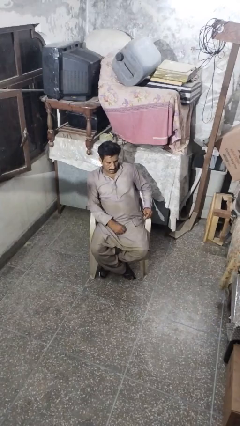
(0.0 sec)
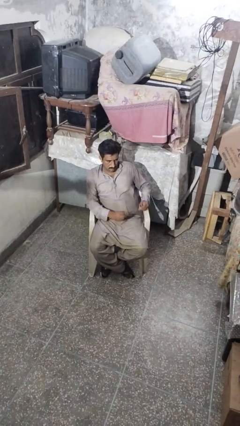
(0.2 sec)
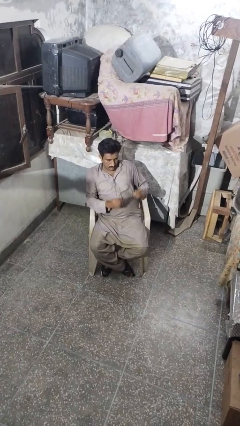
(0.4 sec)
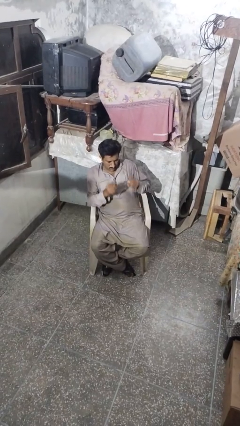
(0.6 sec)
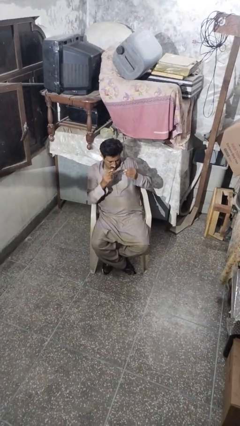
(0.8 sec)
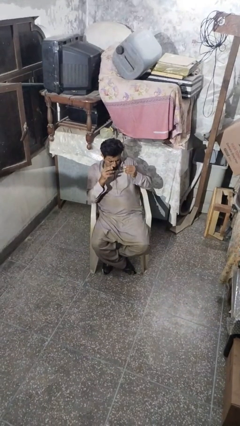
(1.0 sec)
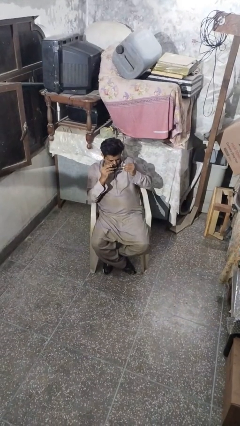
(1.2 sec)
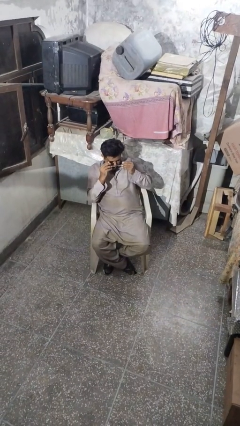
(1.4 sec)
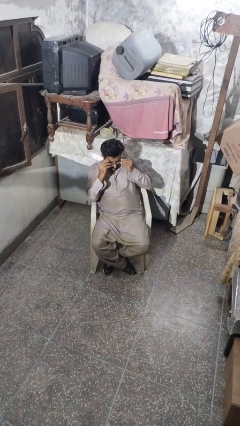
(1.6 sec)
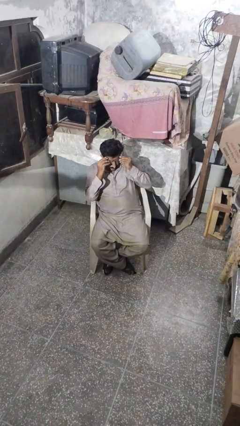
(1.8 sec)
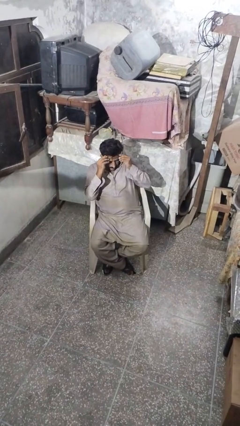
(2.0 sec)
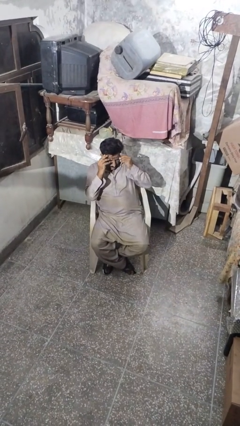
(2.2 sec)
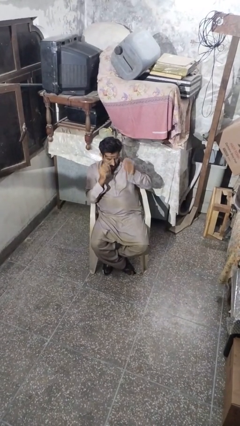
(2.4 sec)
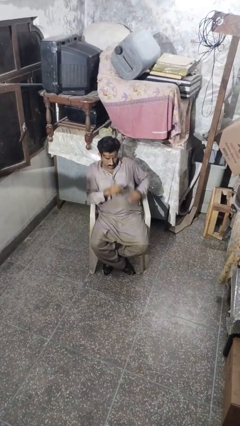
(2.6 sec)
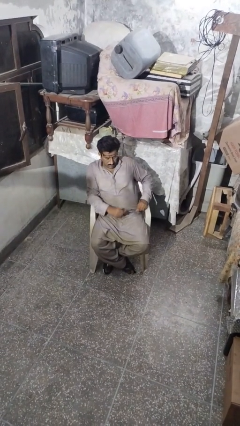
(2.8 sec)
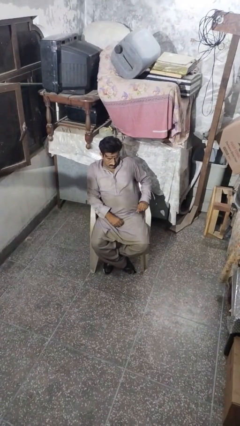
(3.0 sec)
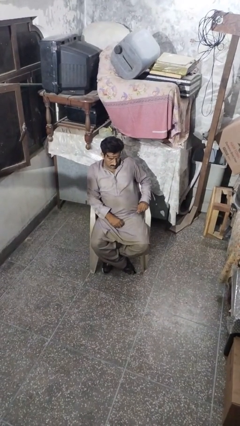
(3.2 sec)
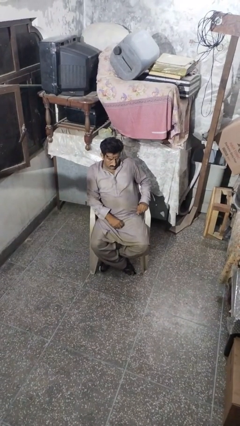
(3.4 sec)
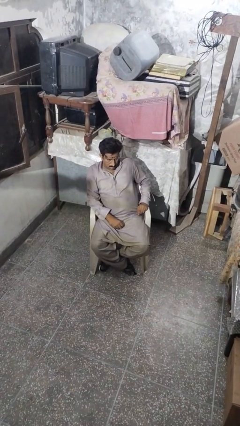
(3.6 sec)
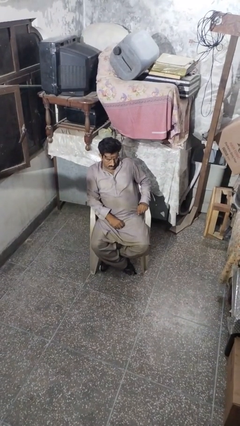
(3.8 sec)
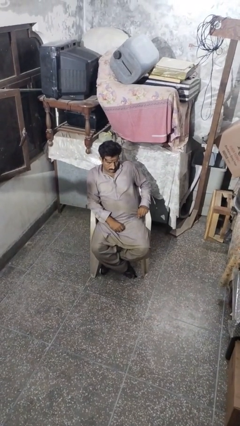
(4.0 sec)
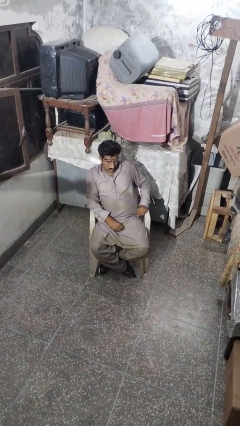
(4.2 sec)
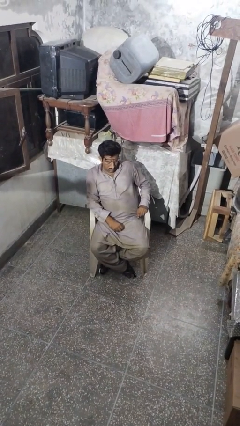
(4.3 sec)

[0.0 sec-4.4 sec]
person puts on glasses

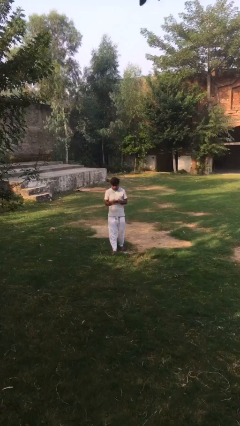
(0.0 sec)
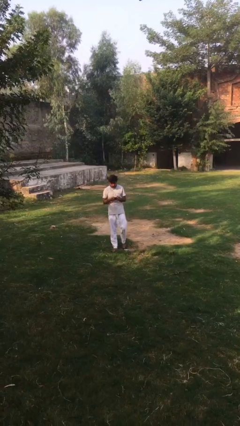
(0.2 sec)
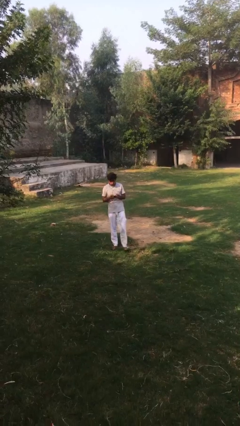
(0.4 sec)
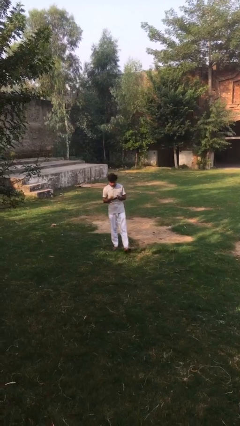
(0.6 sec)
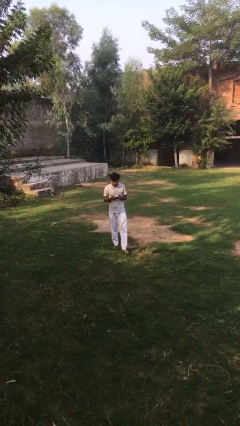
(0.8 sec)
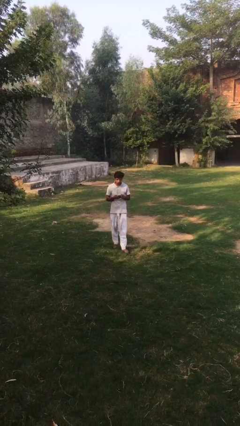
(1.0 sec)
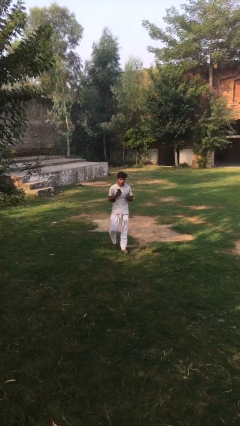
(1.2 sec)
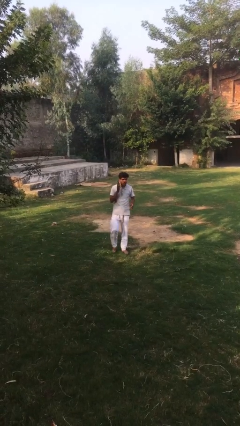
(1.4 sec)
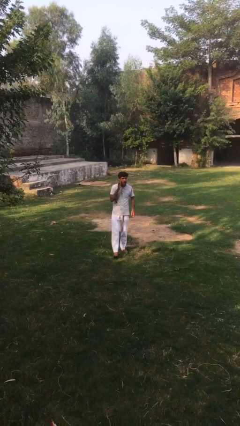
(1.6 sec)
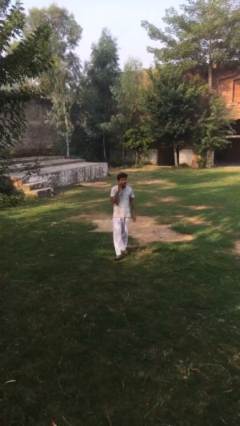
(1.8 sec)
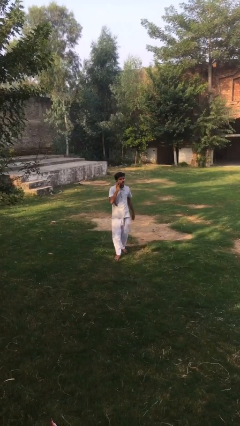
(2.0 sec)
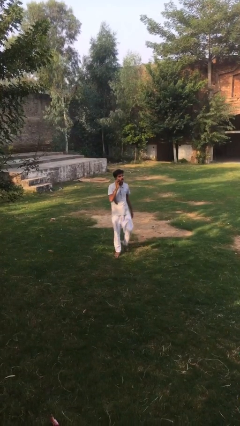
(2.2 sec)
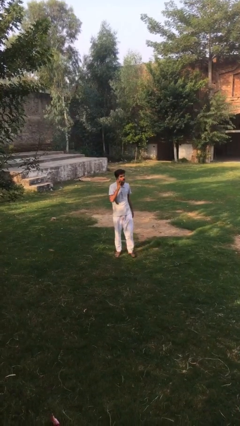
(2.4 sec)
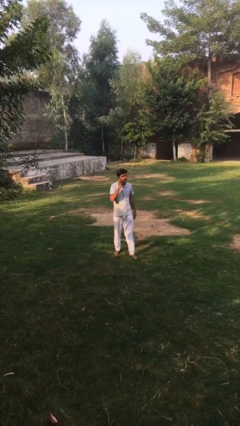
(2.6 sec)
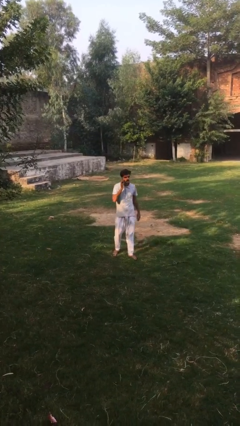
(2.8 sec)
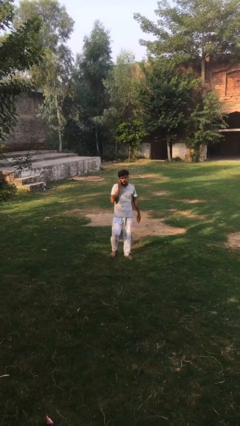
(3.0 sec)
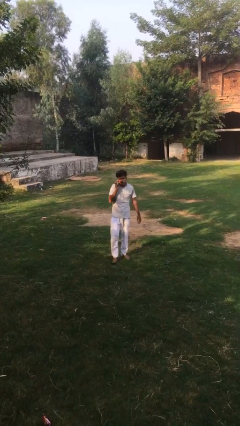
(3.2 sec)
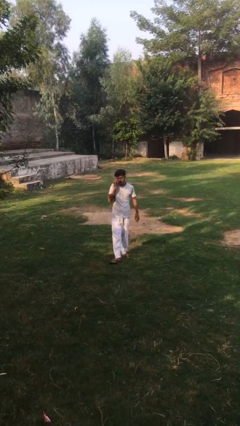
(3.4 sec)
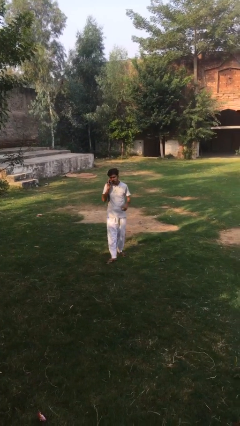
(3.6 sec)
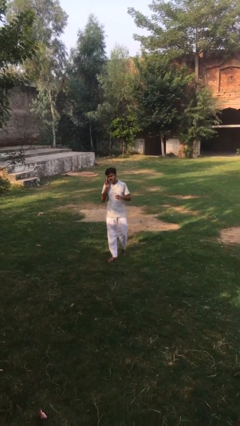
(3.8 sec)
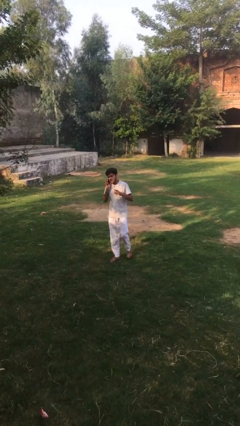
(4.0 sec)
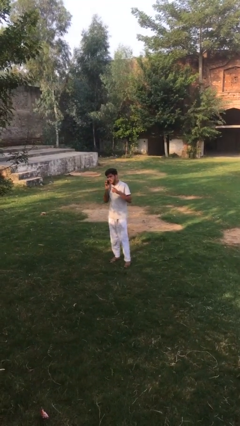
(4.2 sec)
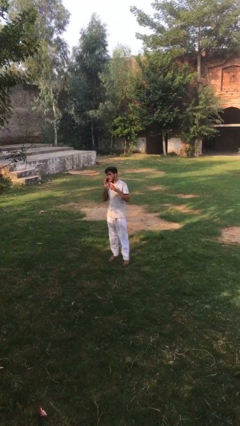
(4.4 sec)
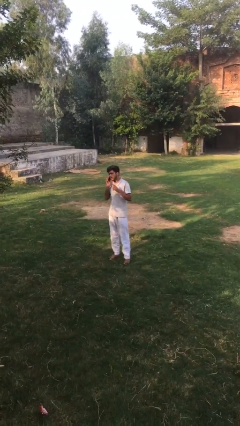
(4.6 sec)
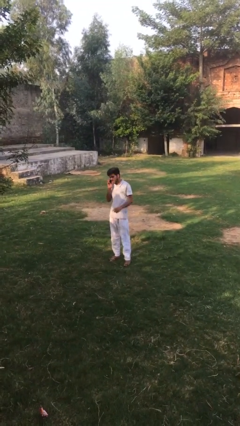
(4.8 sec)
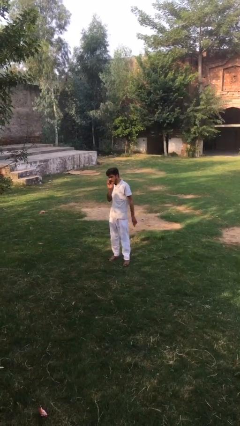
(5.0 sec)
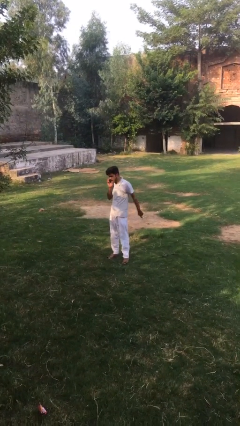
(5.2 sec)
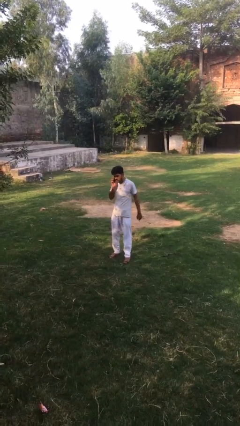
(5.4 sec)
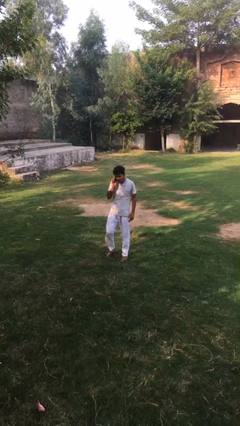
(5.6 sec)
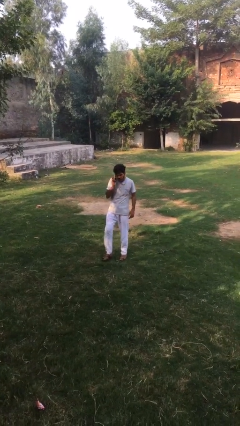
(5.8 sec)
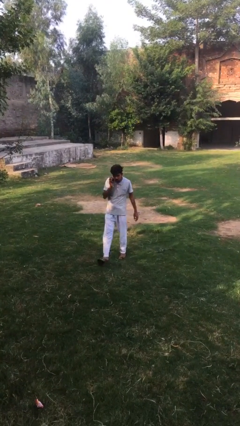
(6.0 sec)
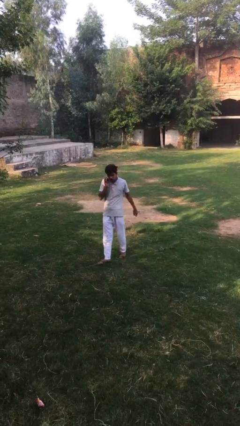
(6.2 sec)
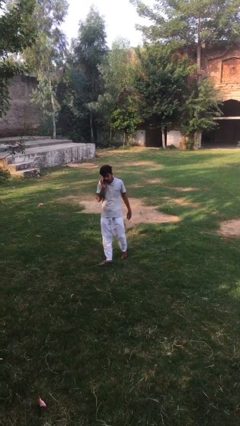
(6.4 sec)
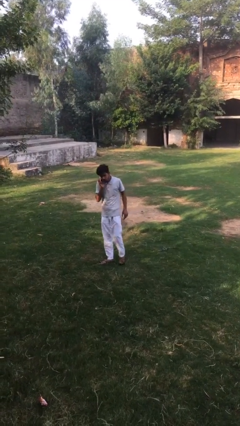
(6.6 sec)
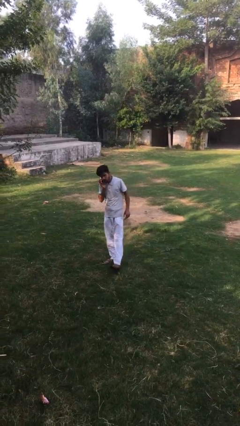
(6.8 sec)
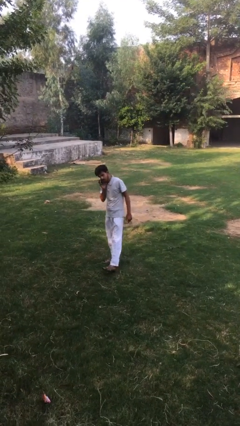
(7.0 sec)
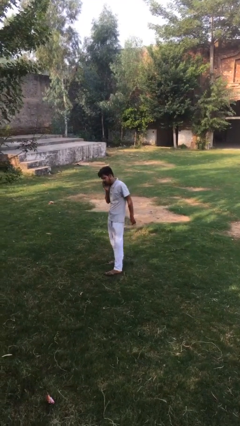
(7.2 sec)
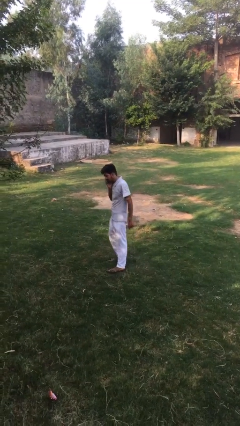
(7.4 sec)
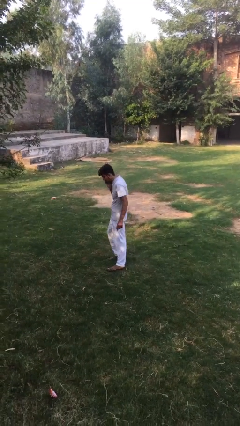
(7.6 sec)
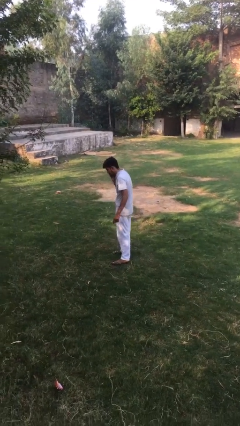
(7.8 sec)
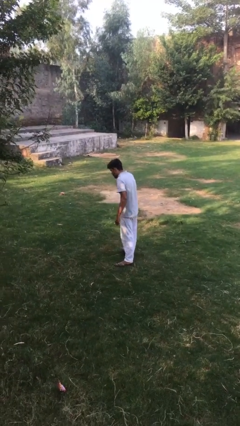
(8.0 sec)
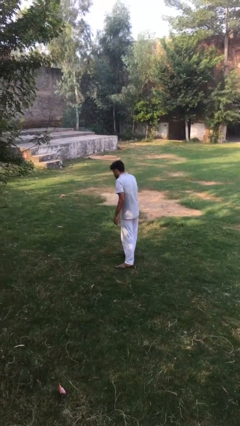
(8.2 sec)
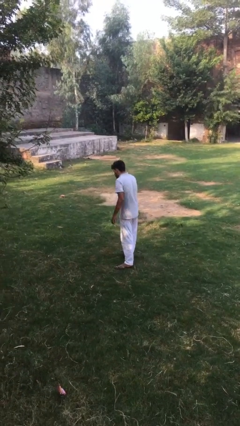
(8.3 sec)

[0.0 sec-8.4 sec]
person talks on phone

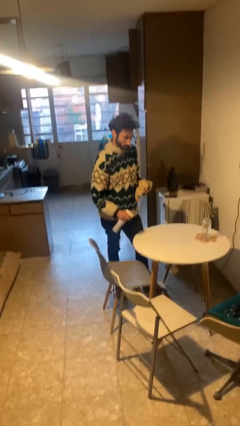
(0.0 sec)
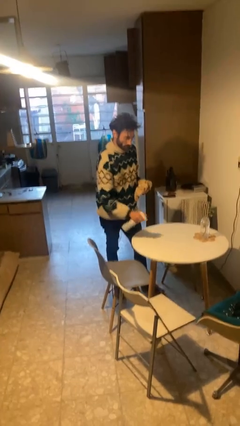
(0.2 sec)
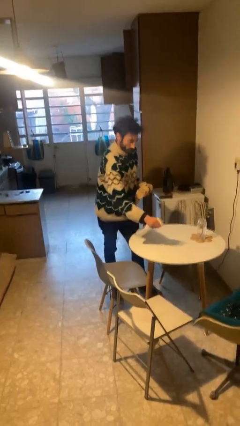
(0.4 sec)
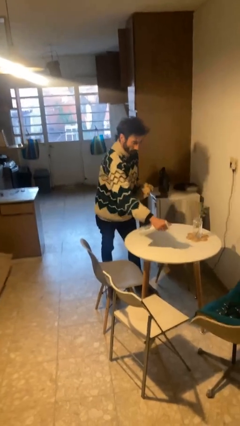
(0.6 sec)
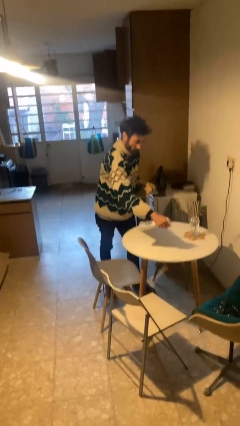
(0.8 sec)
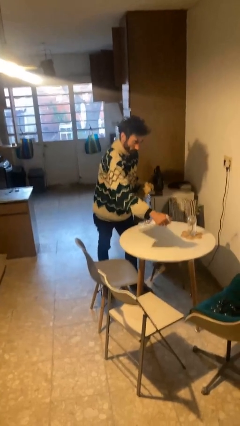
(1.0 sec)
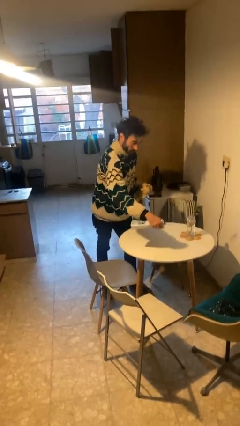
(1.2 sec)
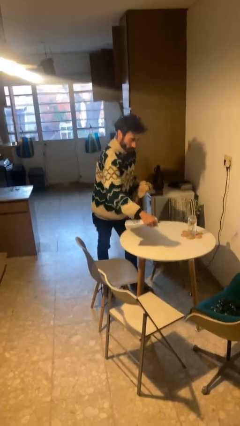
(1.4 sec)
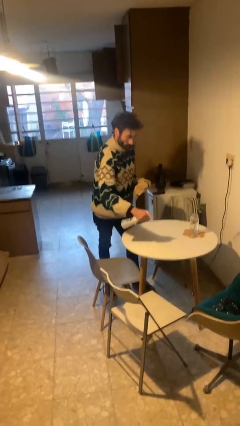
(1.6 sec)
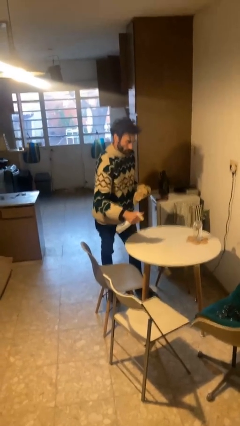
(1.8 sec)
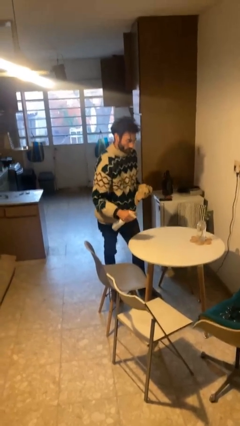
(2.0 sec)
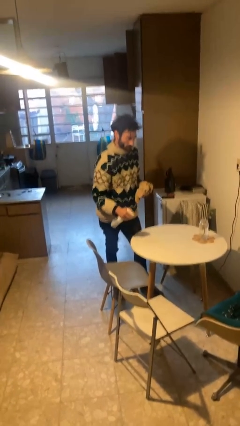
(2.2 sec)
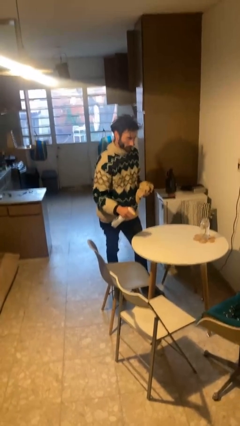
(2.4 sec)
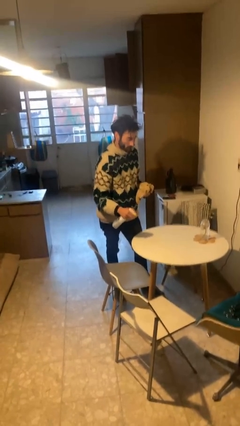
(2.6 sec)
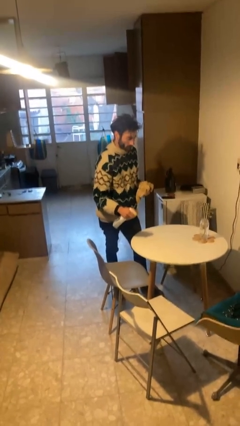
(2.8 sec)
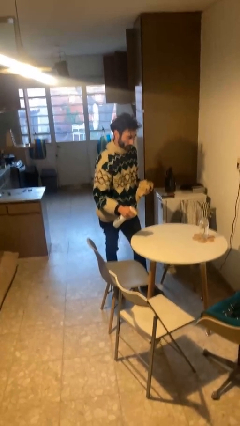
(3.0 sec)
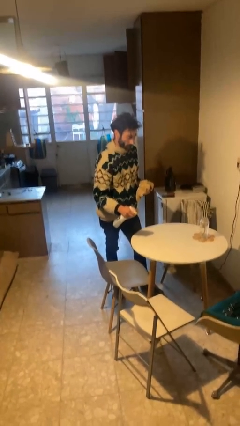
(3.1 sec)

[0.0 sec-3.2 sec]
person sprays from bottle

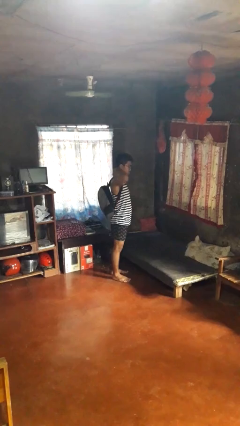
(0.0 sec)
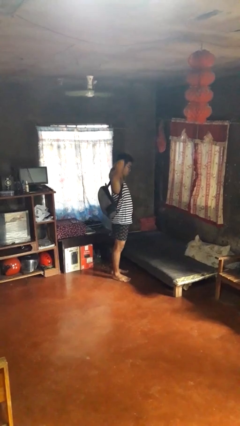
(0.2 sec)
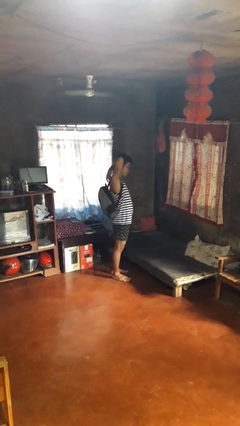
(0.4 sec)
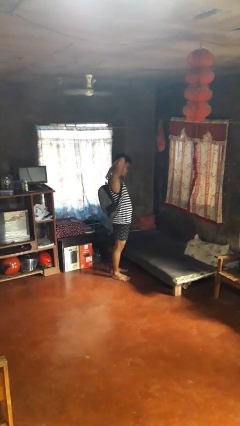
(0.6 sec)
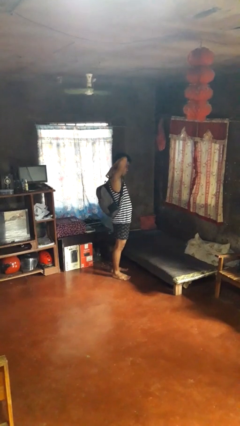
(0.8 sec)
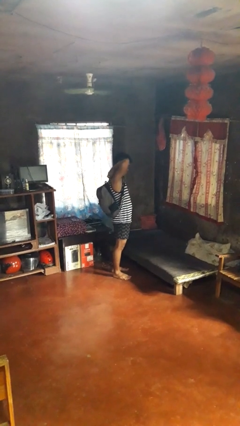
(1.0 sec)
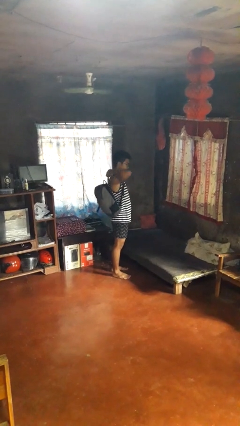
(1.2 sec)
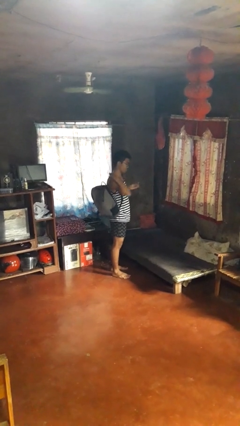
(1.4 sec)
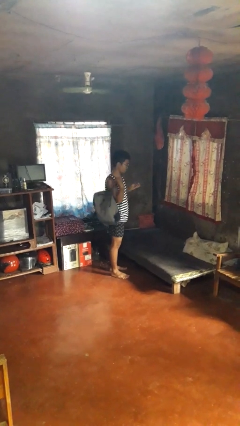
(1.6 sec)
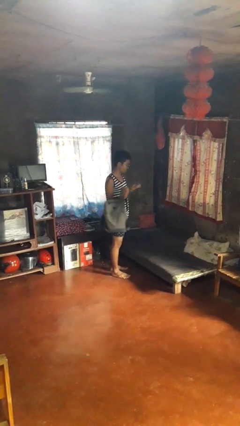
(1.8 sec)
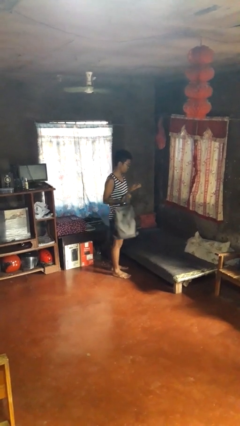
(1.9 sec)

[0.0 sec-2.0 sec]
person takes off backpack
